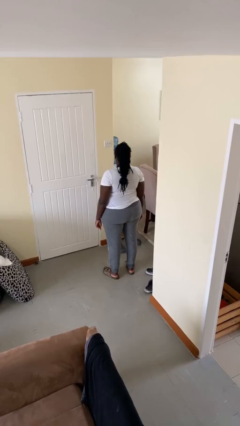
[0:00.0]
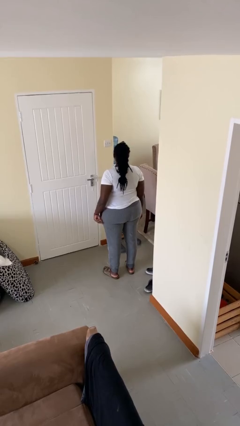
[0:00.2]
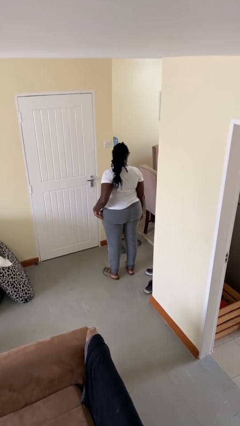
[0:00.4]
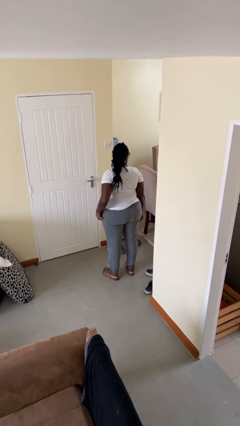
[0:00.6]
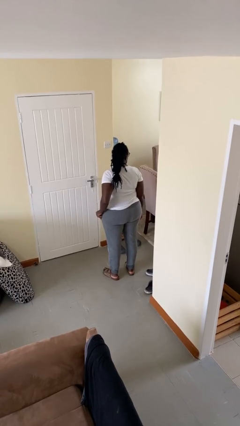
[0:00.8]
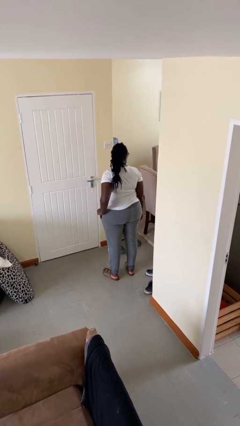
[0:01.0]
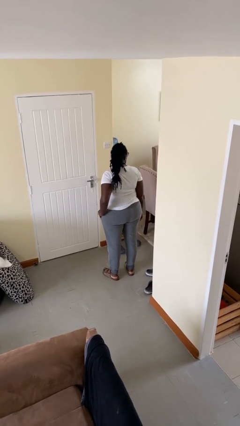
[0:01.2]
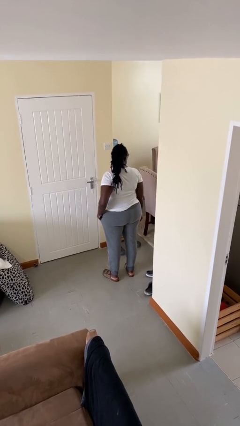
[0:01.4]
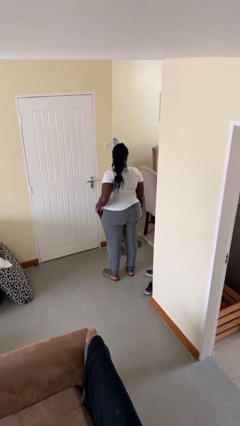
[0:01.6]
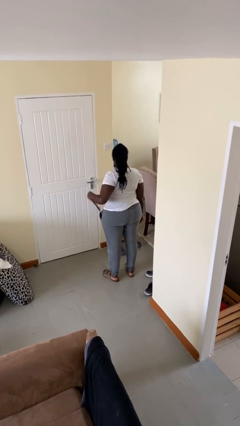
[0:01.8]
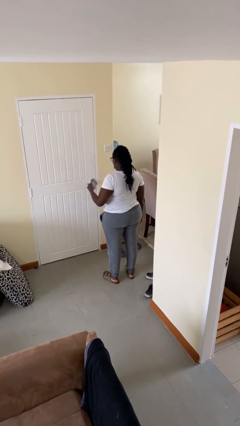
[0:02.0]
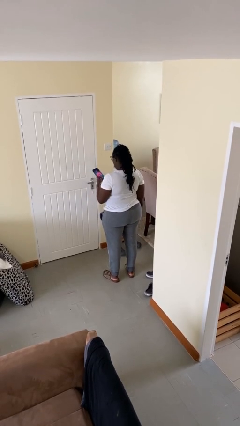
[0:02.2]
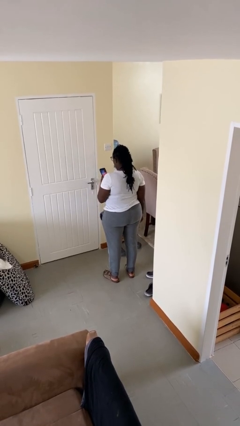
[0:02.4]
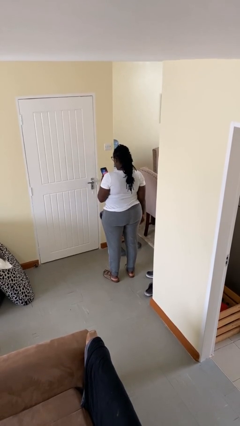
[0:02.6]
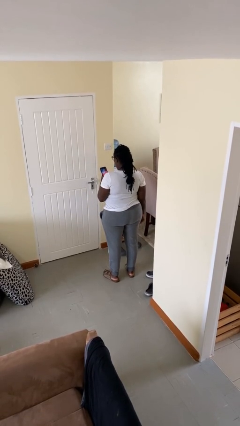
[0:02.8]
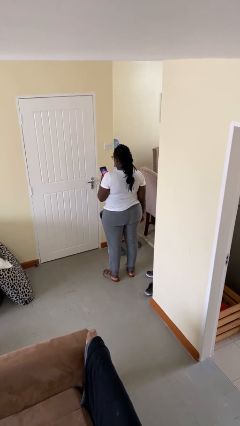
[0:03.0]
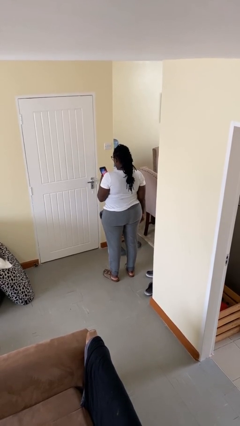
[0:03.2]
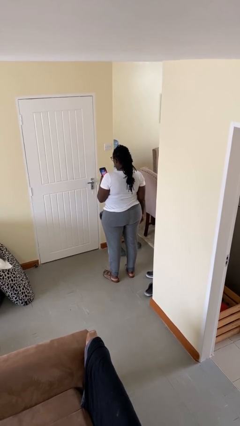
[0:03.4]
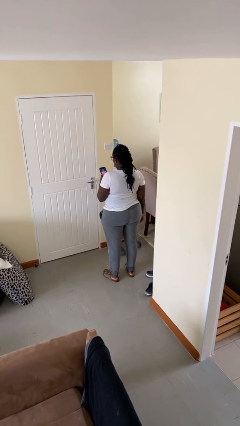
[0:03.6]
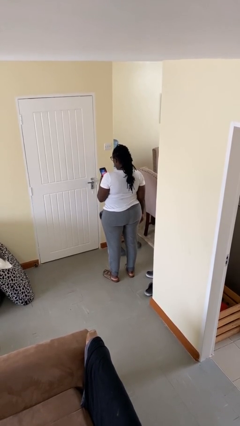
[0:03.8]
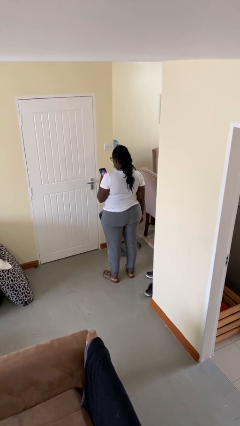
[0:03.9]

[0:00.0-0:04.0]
person takes phone from pocket

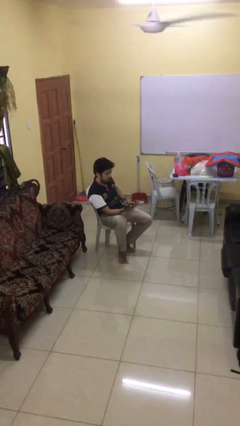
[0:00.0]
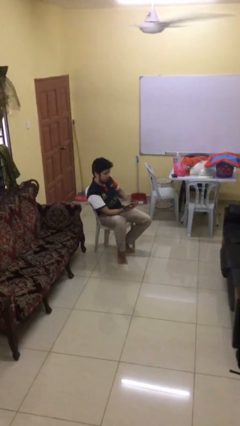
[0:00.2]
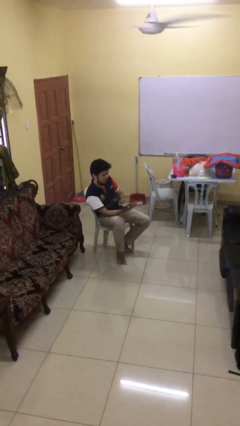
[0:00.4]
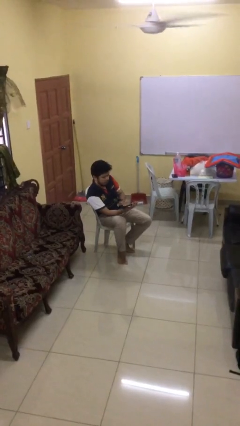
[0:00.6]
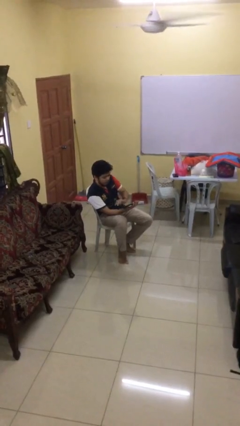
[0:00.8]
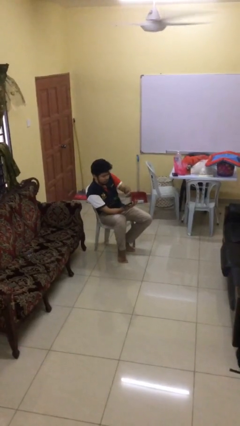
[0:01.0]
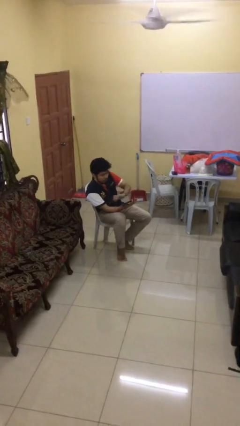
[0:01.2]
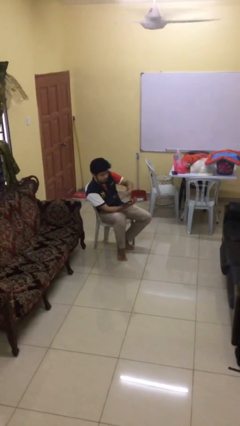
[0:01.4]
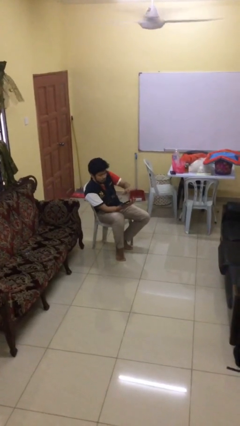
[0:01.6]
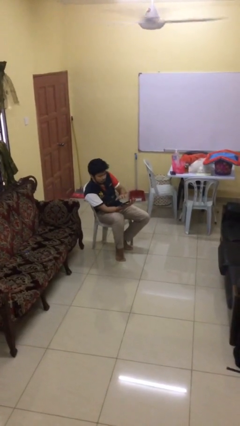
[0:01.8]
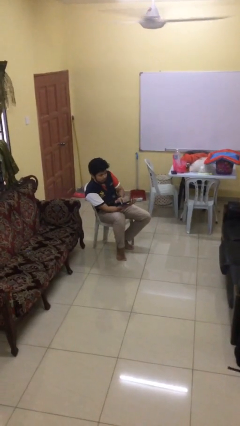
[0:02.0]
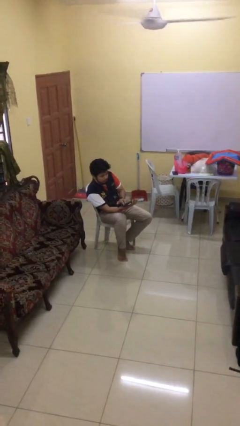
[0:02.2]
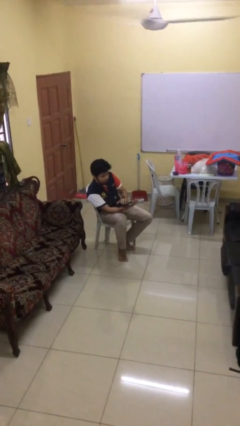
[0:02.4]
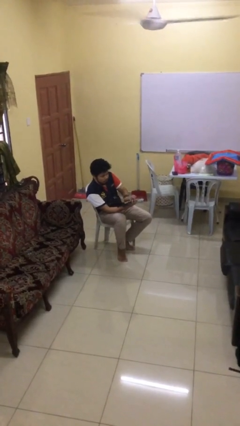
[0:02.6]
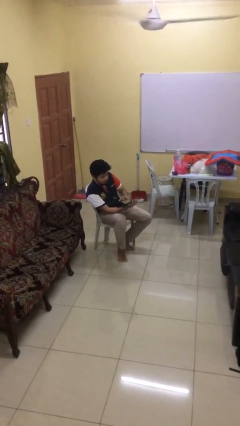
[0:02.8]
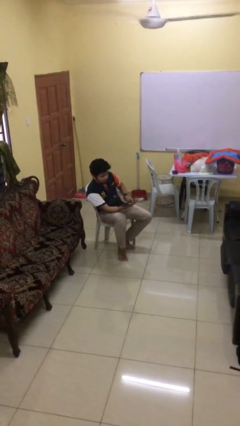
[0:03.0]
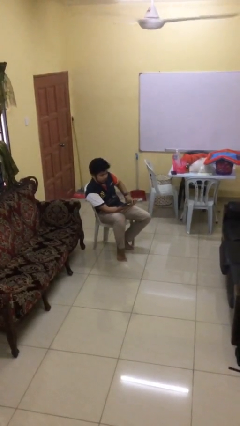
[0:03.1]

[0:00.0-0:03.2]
person interacts with tablet

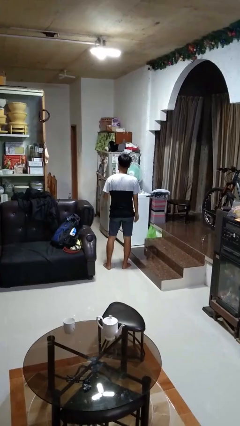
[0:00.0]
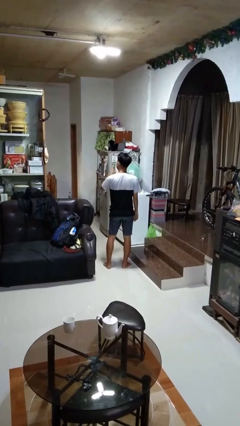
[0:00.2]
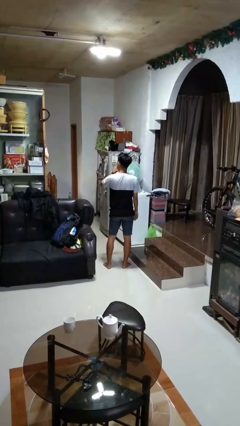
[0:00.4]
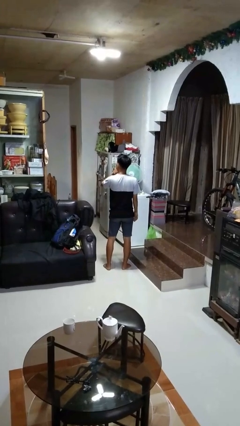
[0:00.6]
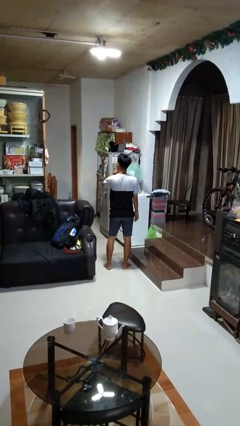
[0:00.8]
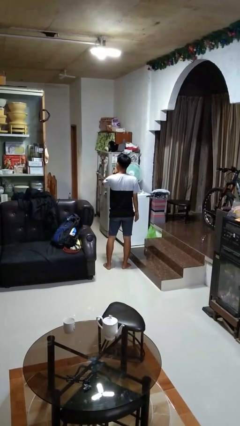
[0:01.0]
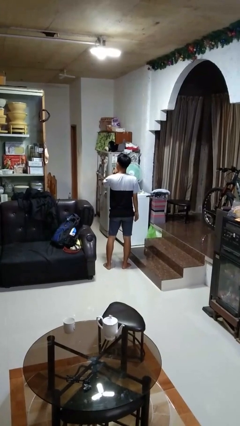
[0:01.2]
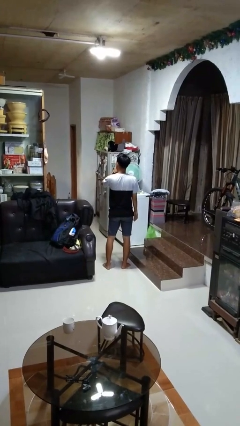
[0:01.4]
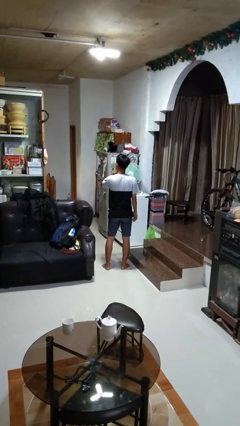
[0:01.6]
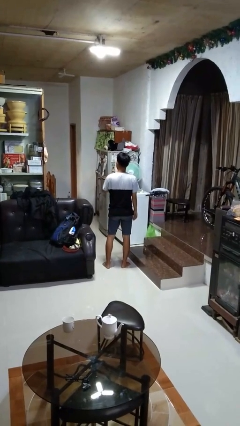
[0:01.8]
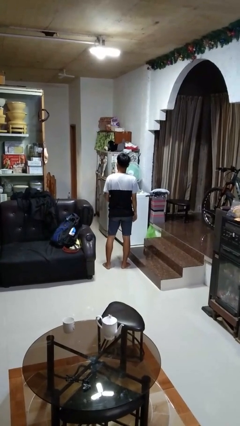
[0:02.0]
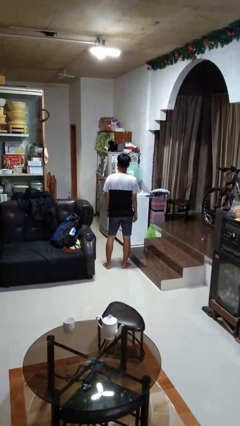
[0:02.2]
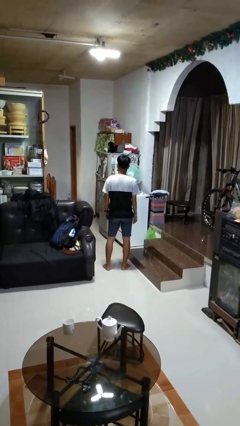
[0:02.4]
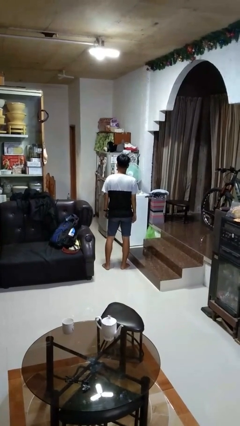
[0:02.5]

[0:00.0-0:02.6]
person gestures be quiet

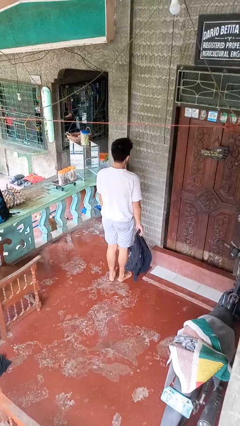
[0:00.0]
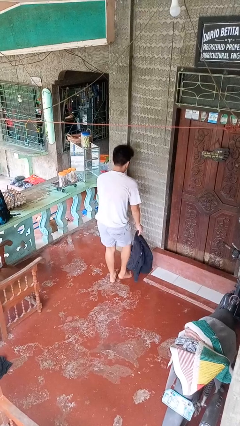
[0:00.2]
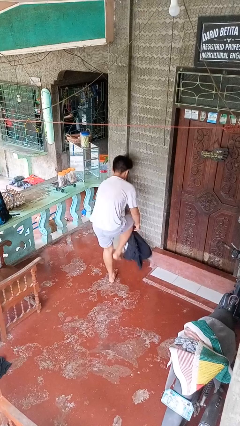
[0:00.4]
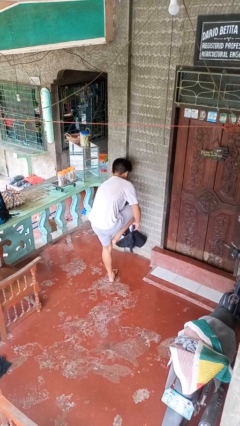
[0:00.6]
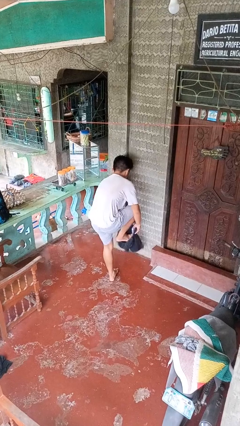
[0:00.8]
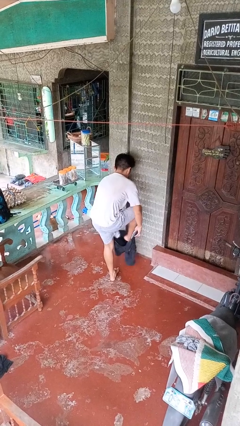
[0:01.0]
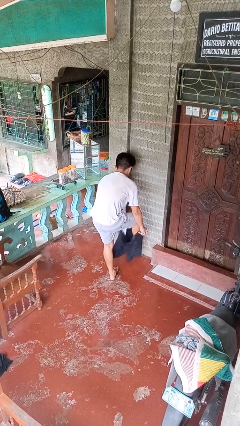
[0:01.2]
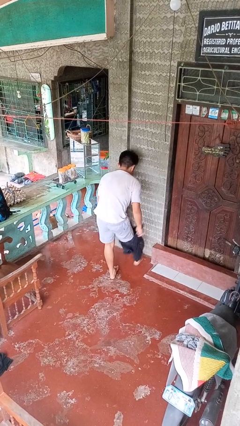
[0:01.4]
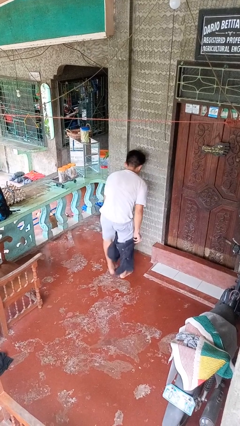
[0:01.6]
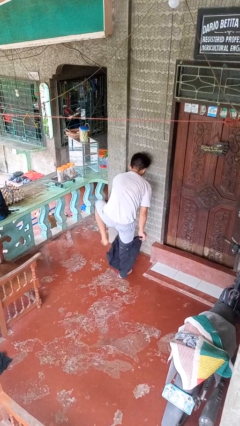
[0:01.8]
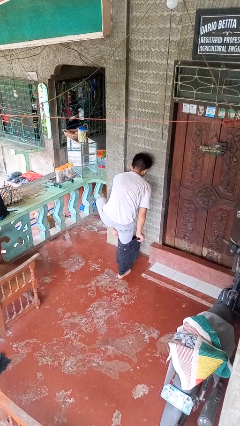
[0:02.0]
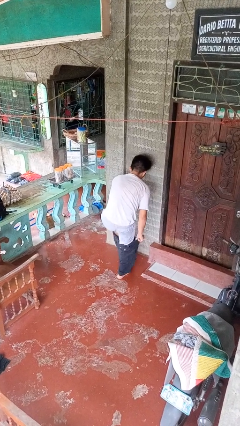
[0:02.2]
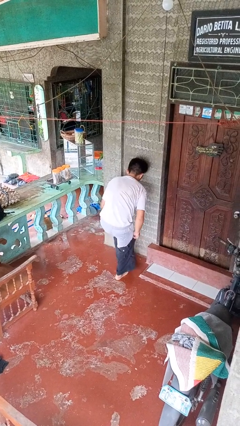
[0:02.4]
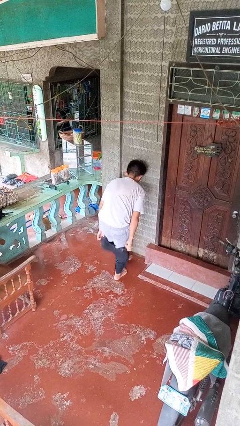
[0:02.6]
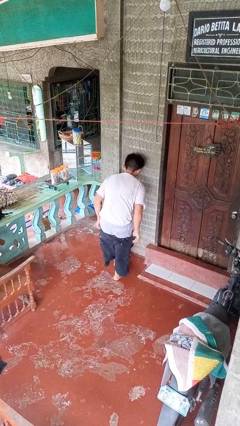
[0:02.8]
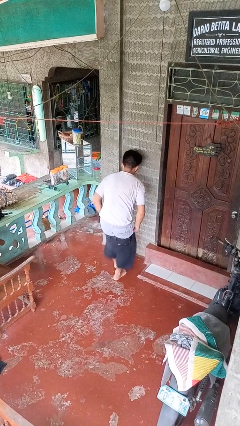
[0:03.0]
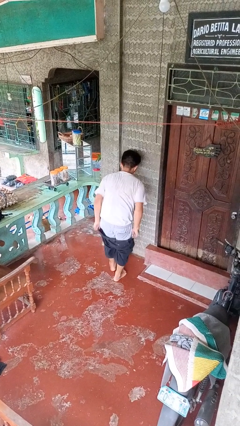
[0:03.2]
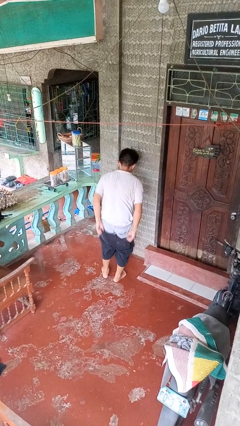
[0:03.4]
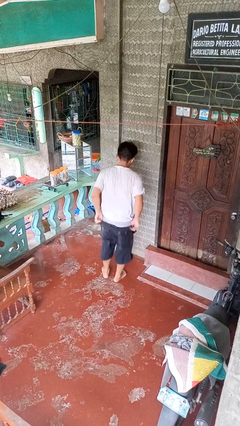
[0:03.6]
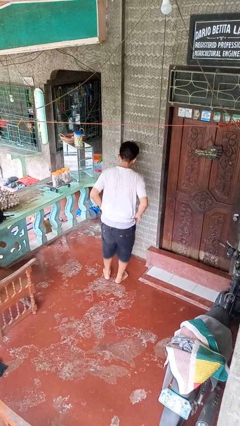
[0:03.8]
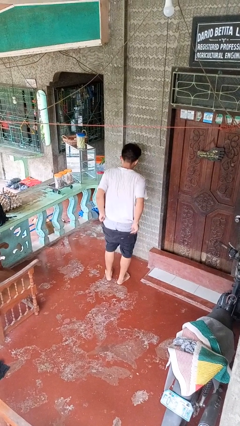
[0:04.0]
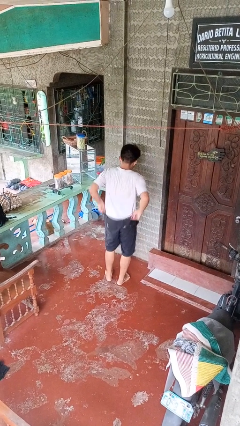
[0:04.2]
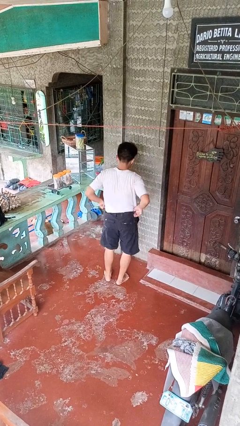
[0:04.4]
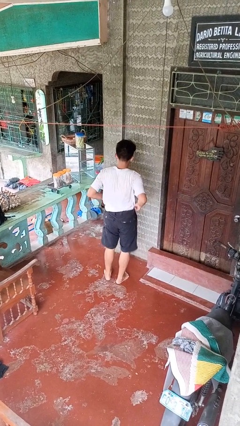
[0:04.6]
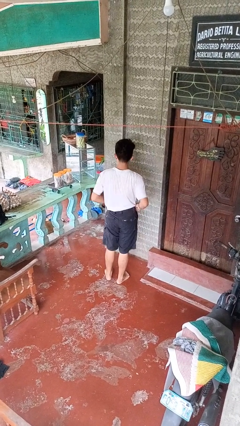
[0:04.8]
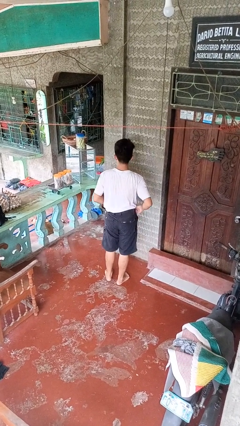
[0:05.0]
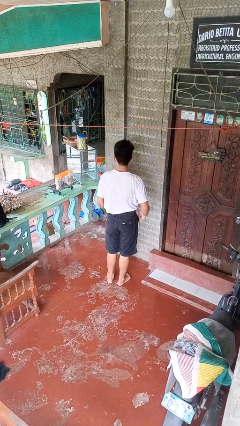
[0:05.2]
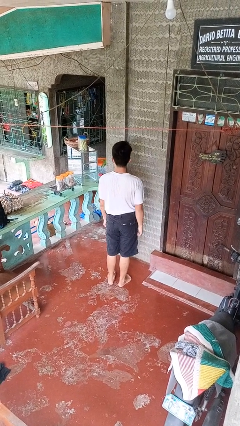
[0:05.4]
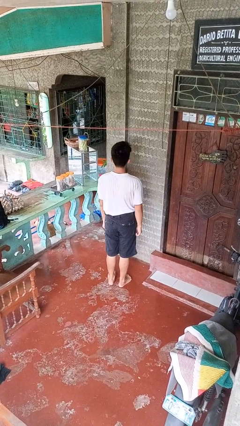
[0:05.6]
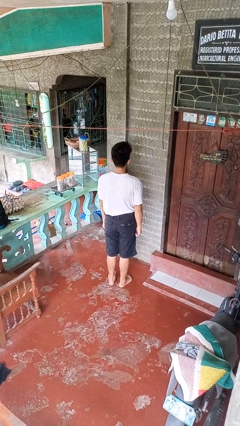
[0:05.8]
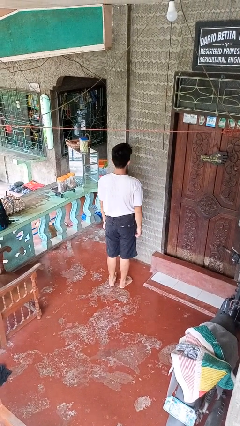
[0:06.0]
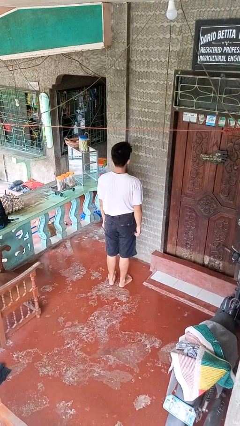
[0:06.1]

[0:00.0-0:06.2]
person puts on pants

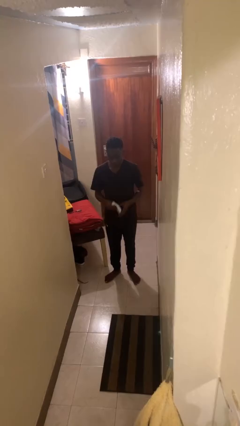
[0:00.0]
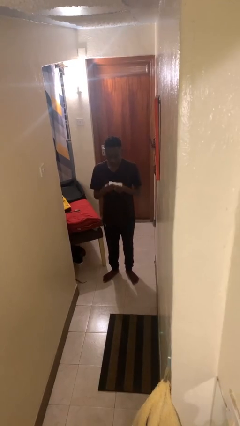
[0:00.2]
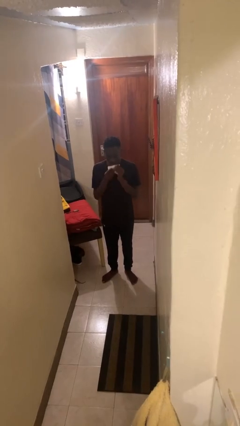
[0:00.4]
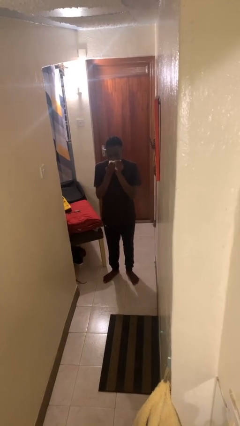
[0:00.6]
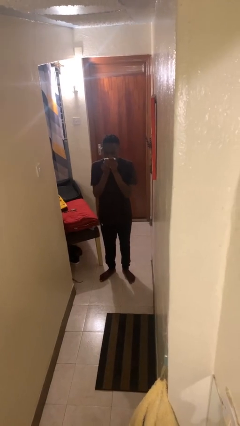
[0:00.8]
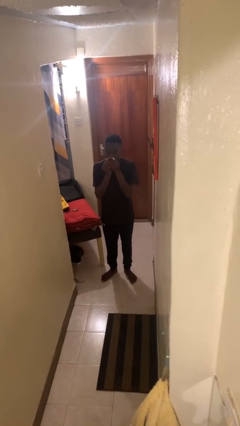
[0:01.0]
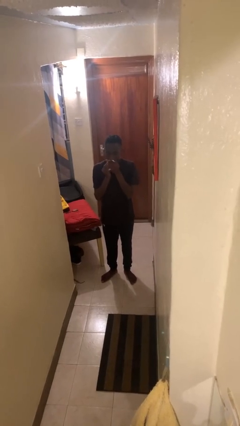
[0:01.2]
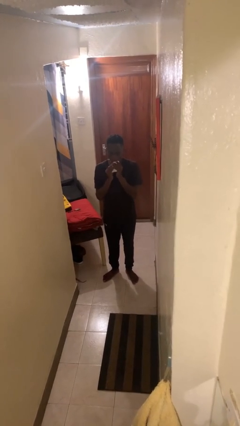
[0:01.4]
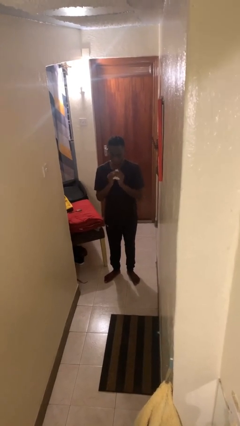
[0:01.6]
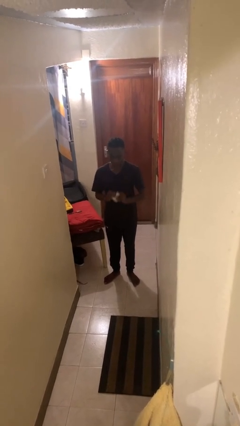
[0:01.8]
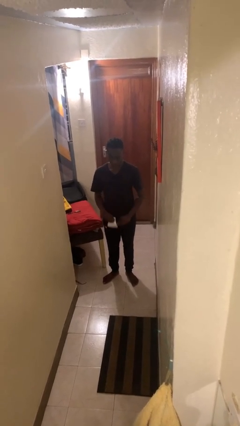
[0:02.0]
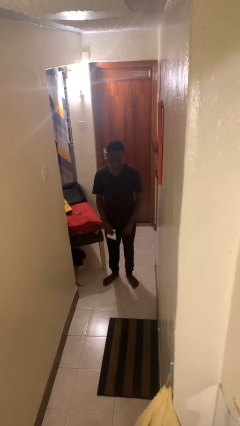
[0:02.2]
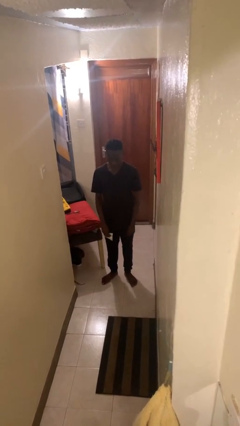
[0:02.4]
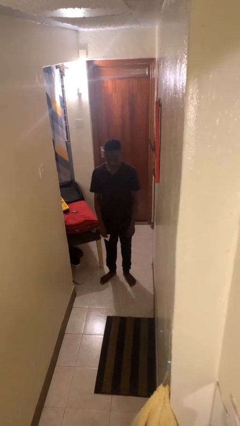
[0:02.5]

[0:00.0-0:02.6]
person wipes mouth with napkin
